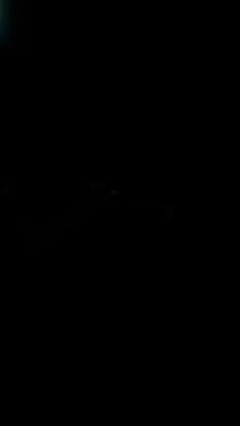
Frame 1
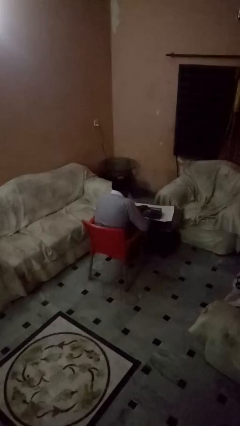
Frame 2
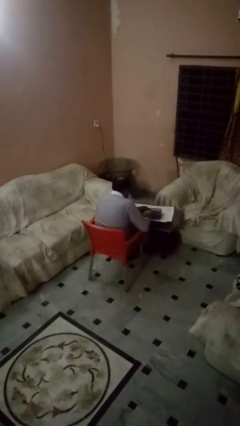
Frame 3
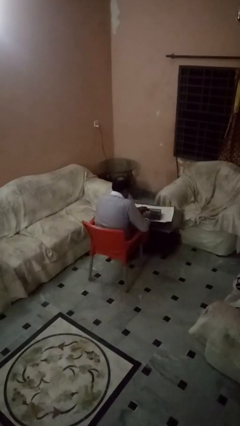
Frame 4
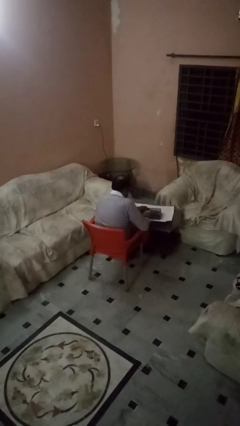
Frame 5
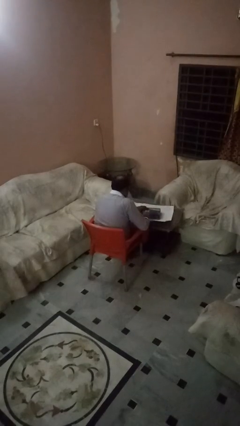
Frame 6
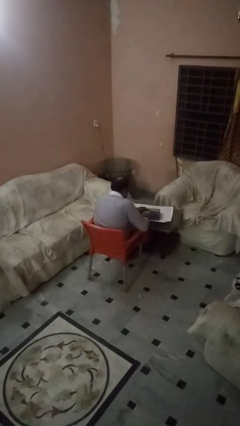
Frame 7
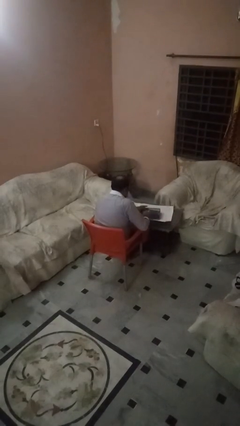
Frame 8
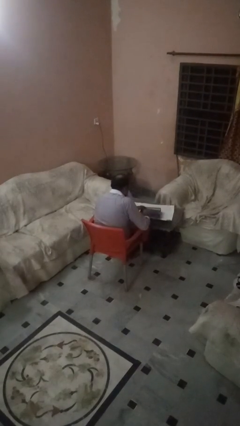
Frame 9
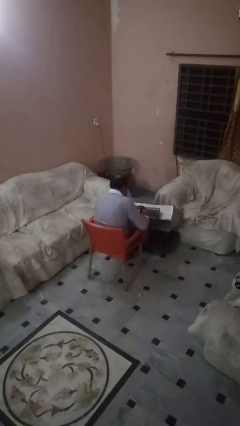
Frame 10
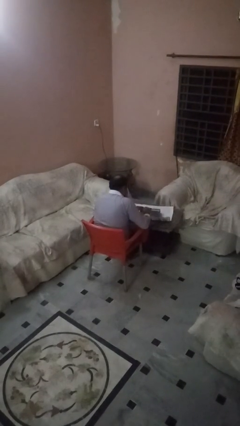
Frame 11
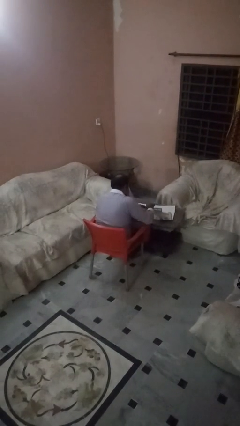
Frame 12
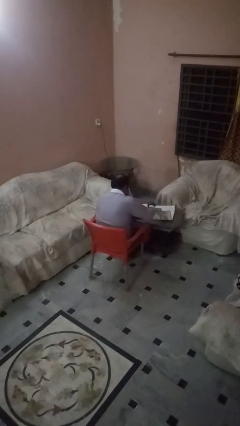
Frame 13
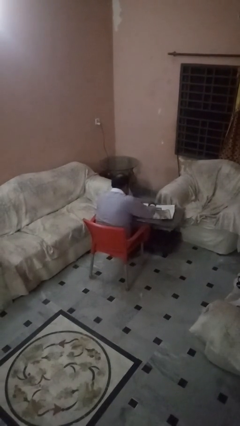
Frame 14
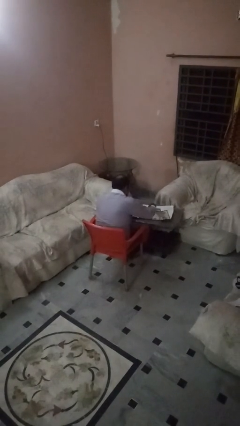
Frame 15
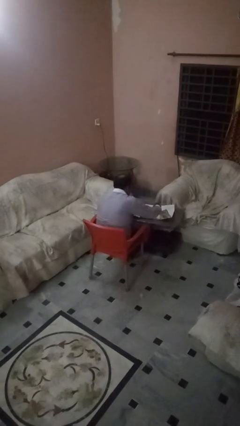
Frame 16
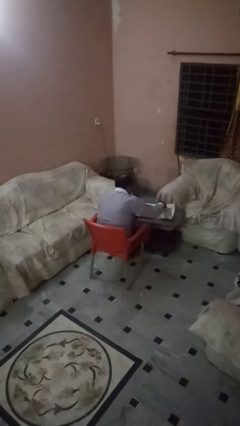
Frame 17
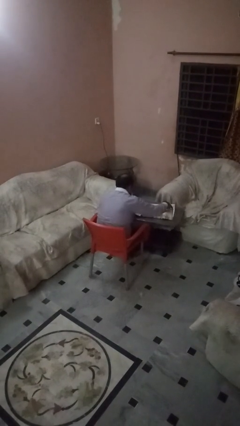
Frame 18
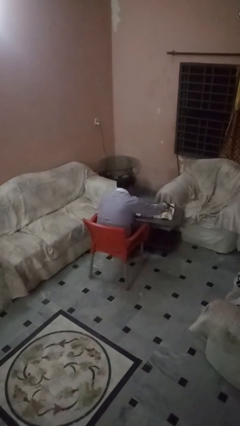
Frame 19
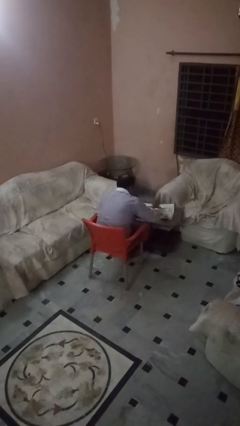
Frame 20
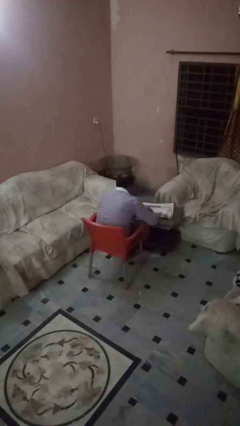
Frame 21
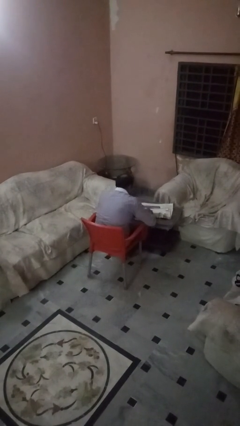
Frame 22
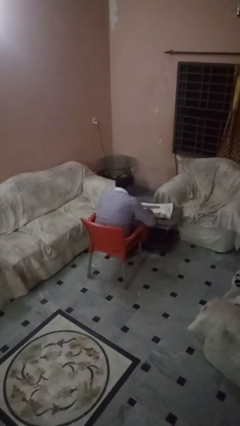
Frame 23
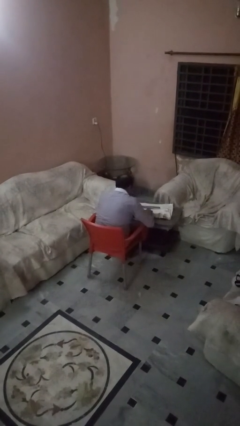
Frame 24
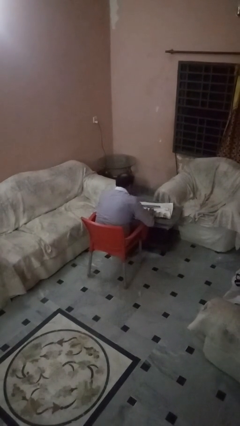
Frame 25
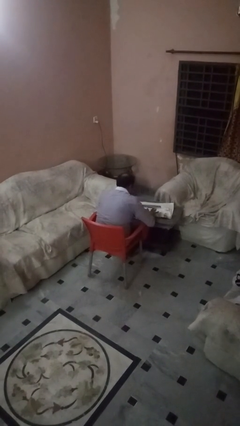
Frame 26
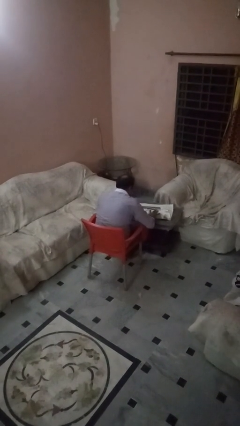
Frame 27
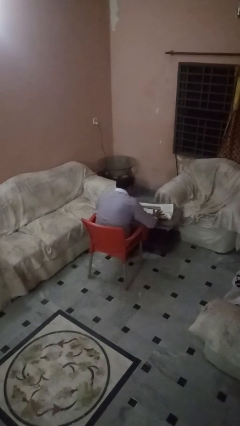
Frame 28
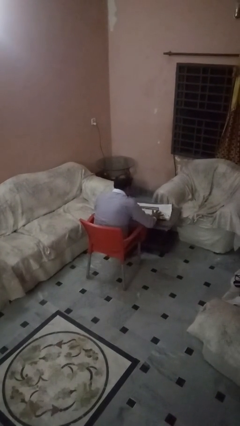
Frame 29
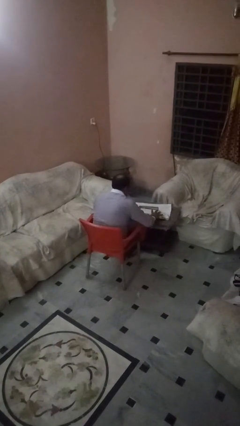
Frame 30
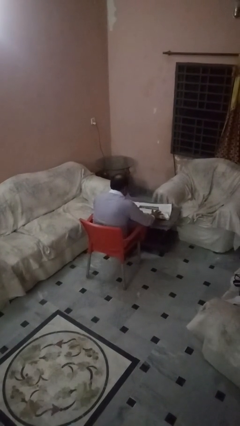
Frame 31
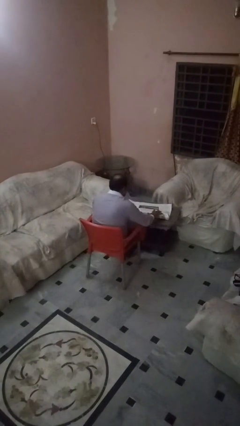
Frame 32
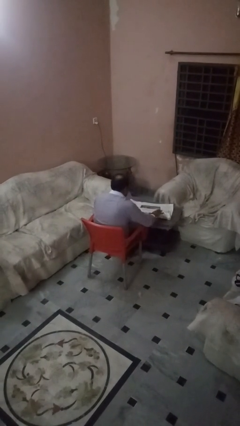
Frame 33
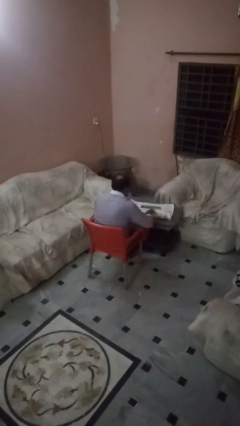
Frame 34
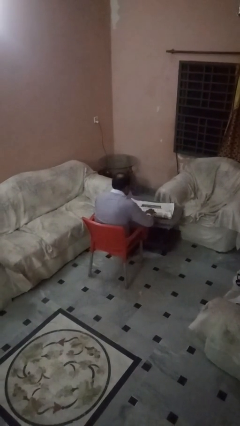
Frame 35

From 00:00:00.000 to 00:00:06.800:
person wraps box

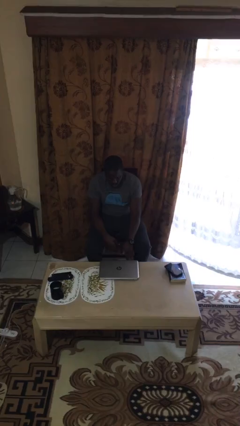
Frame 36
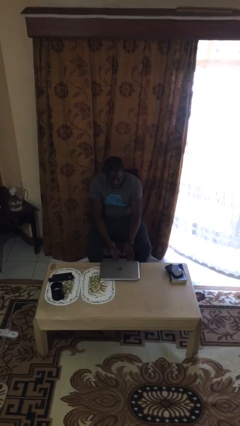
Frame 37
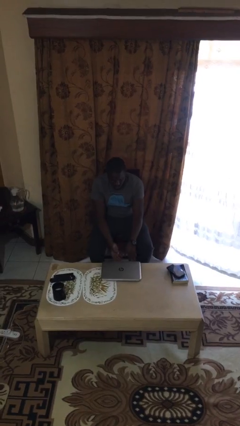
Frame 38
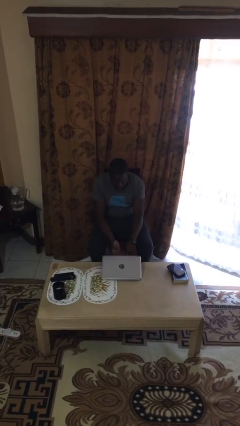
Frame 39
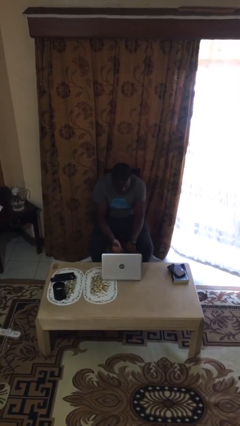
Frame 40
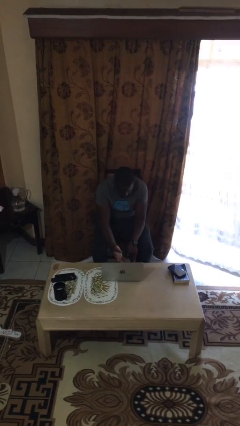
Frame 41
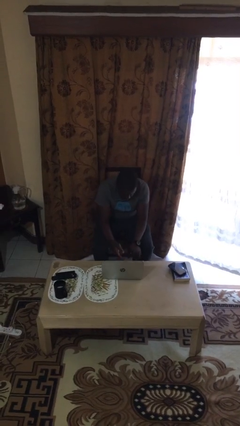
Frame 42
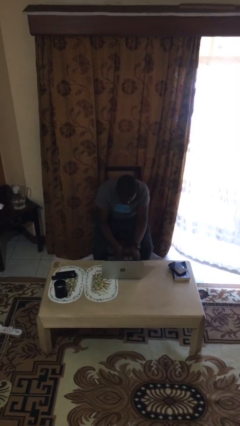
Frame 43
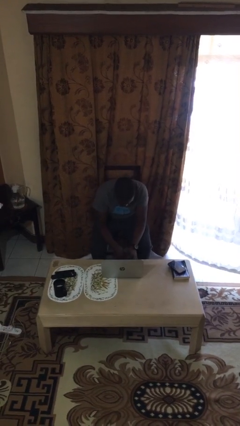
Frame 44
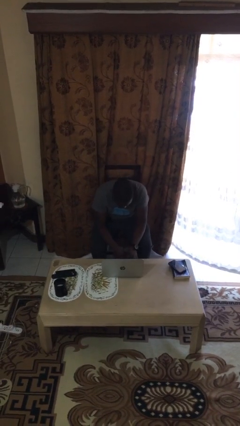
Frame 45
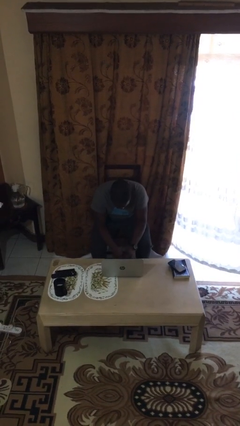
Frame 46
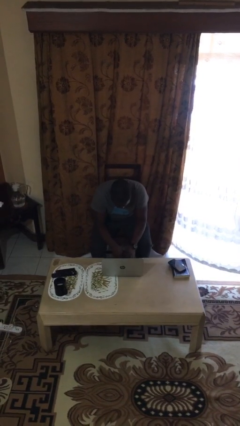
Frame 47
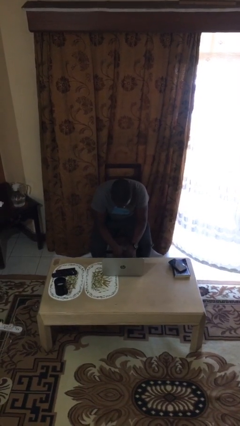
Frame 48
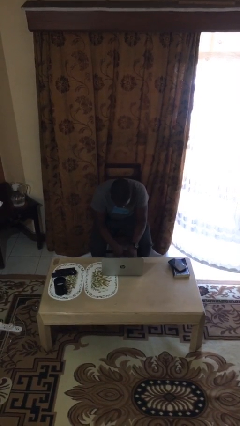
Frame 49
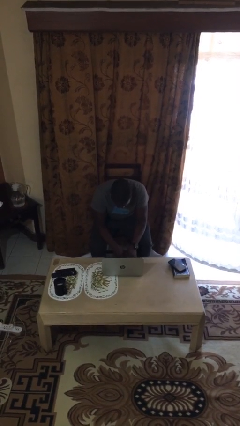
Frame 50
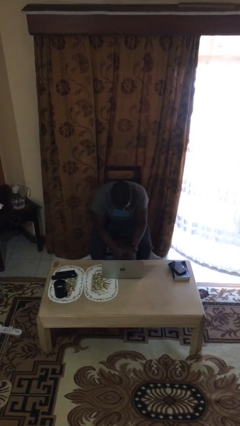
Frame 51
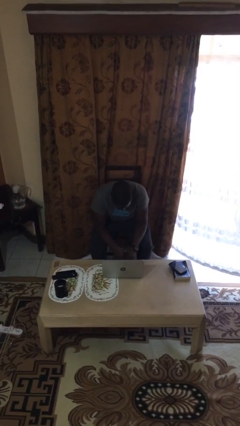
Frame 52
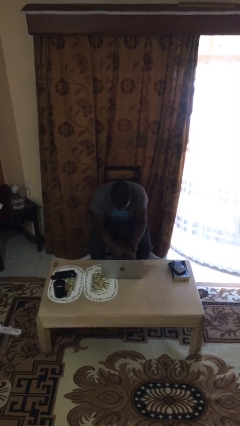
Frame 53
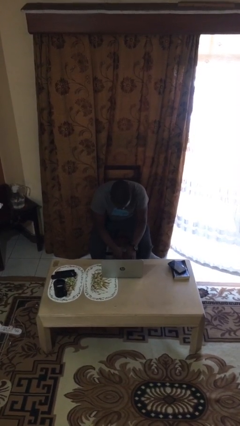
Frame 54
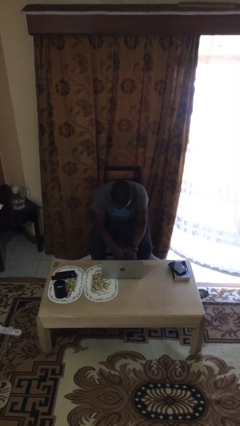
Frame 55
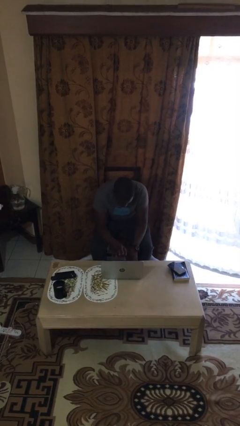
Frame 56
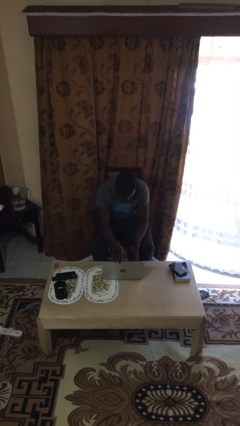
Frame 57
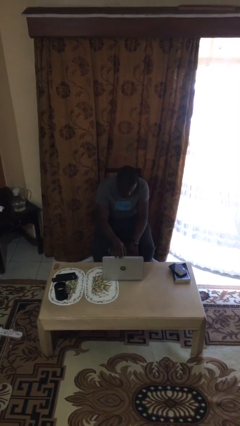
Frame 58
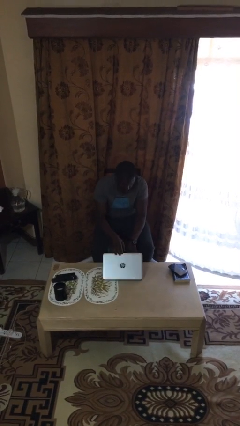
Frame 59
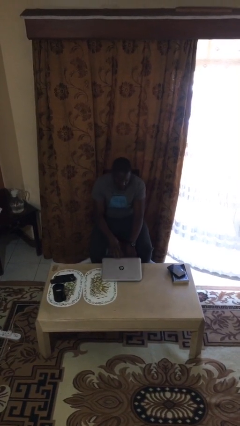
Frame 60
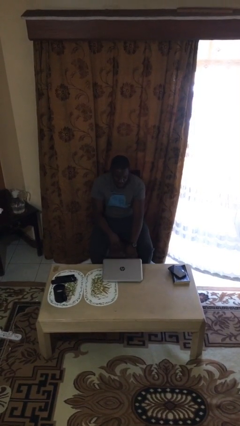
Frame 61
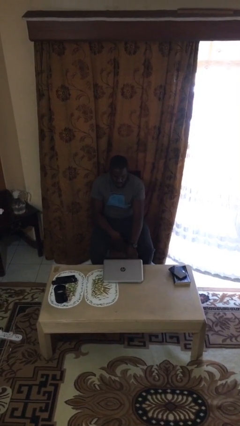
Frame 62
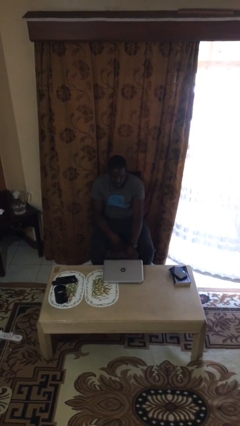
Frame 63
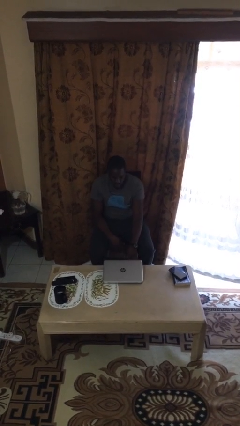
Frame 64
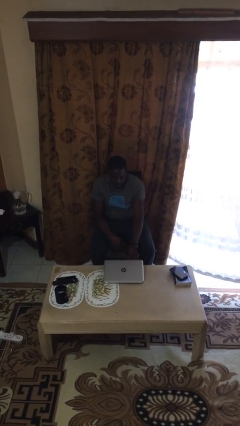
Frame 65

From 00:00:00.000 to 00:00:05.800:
person interacts with laptop

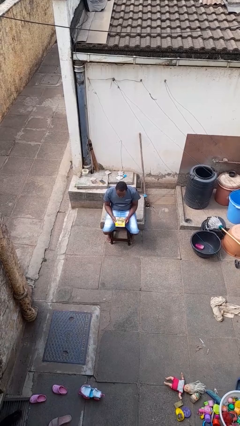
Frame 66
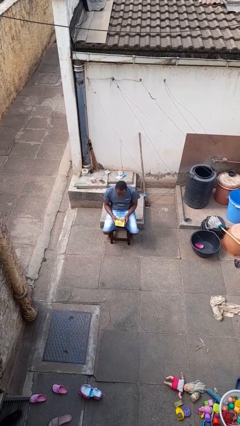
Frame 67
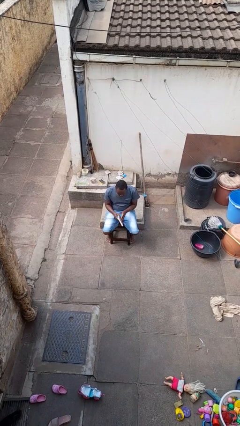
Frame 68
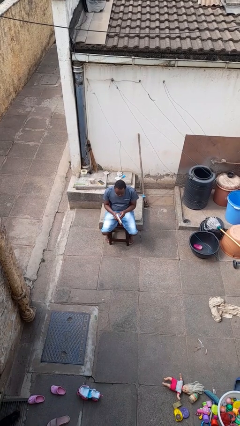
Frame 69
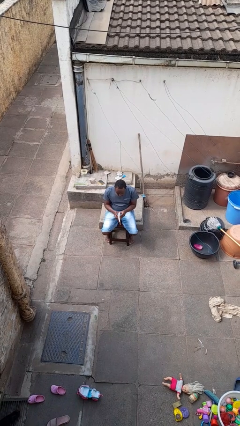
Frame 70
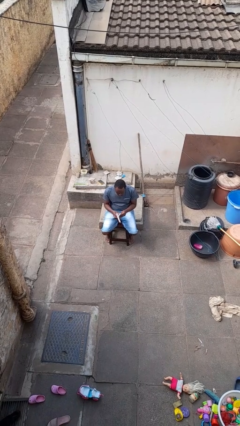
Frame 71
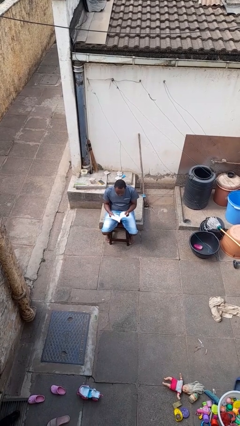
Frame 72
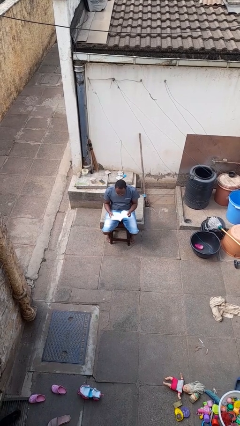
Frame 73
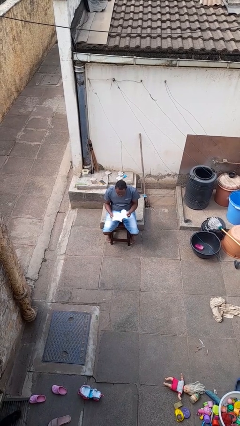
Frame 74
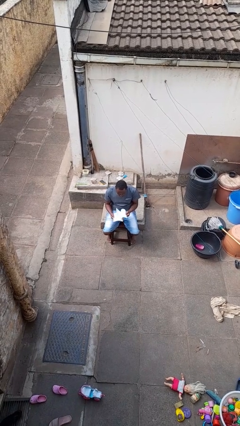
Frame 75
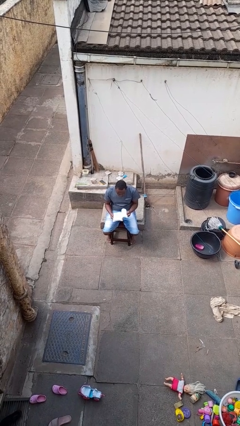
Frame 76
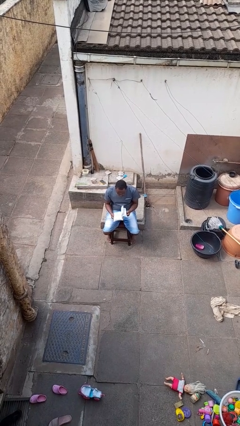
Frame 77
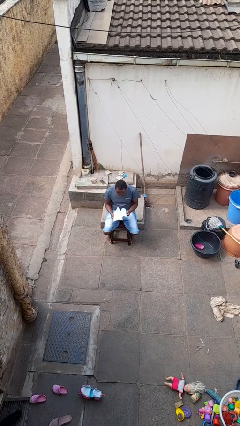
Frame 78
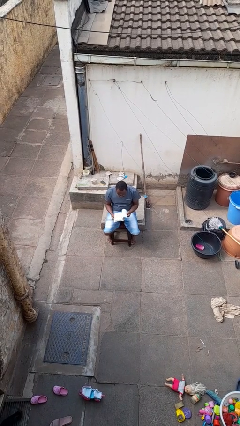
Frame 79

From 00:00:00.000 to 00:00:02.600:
person reads book

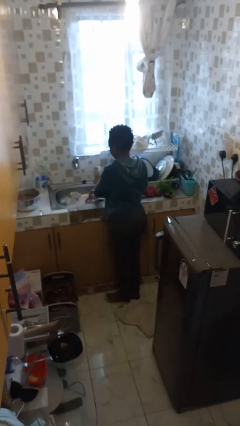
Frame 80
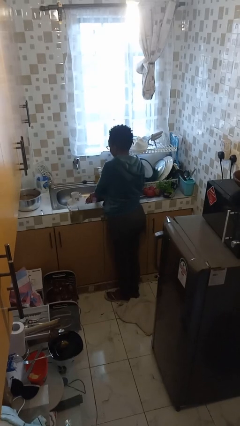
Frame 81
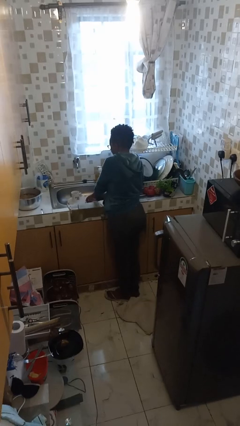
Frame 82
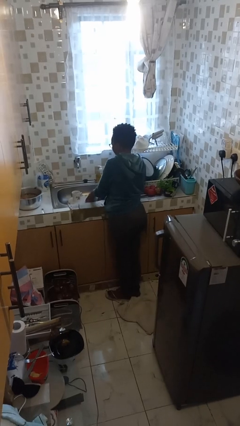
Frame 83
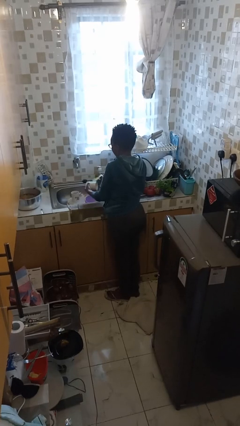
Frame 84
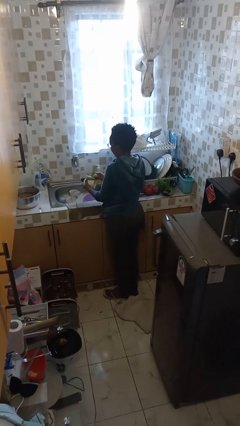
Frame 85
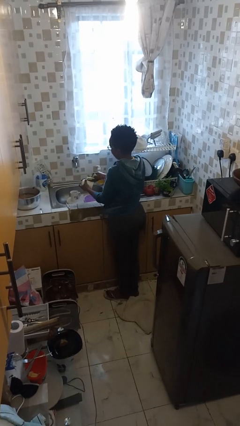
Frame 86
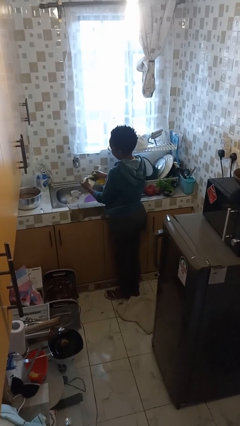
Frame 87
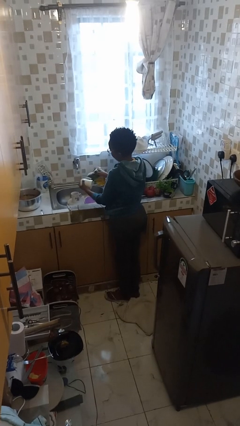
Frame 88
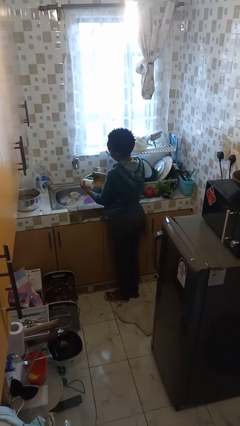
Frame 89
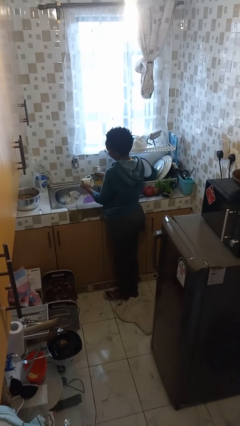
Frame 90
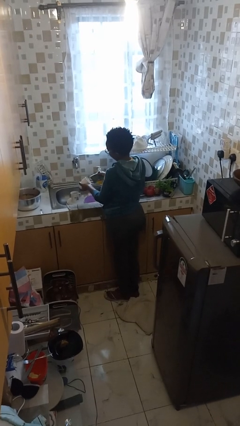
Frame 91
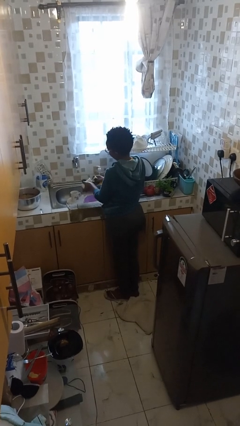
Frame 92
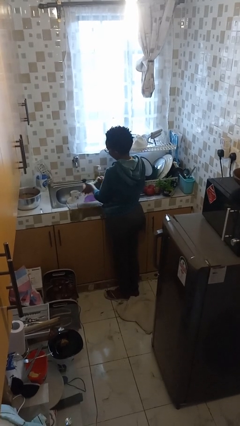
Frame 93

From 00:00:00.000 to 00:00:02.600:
person washes dish
